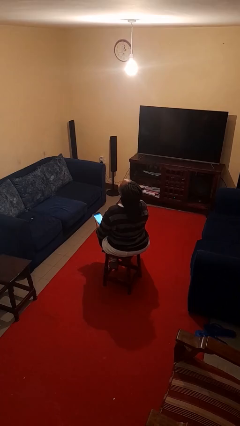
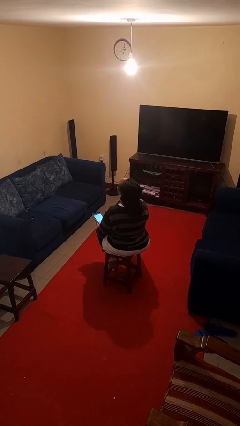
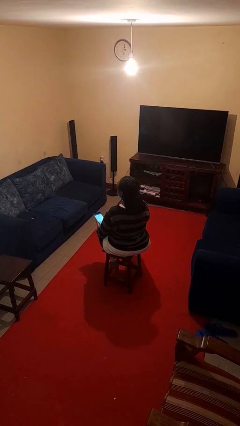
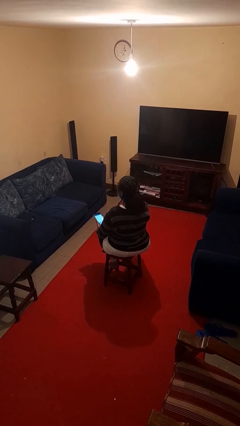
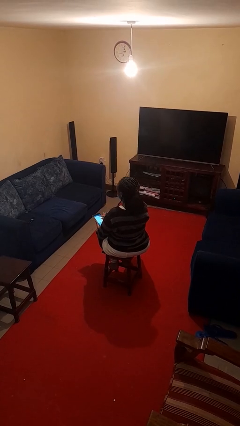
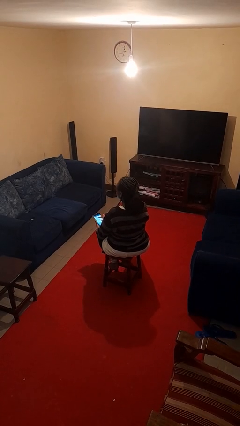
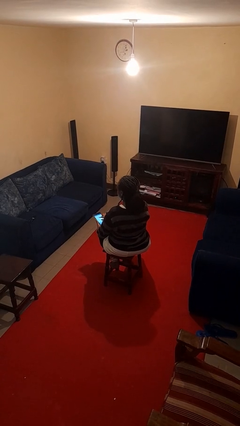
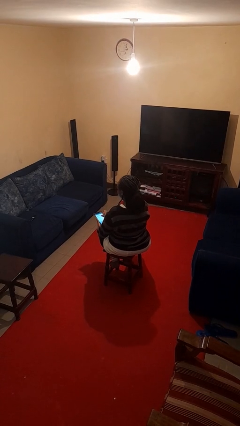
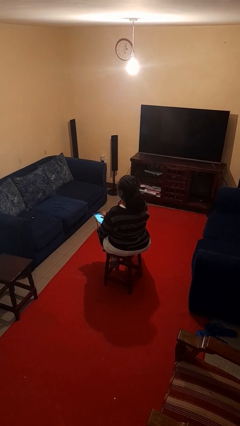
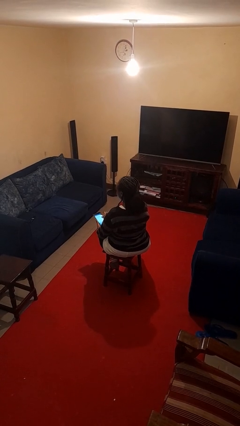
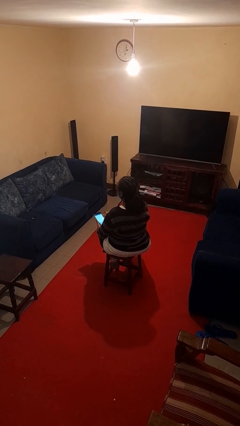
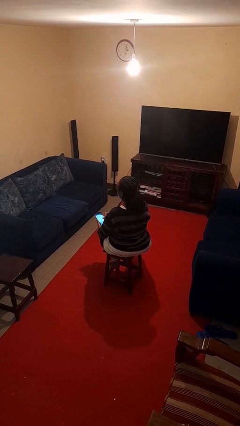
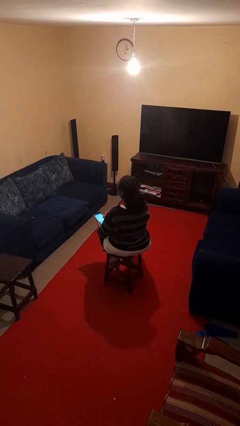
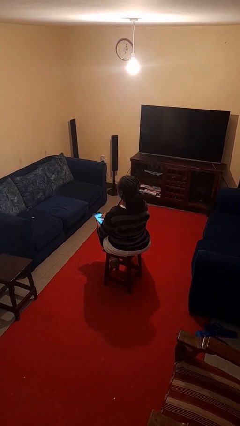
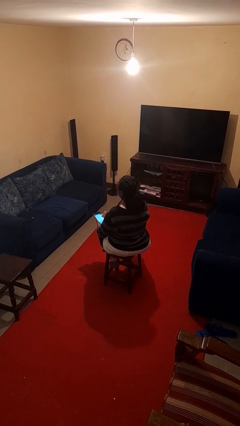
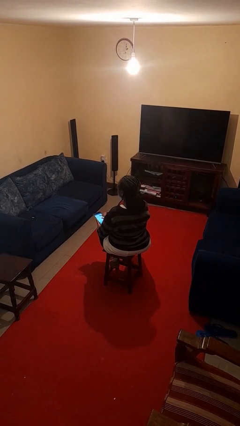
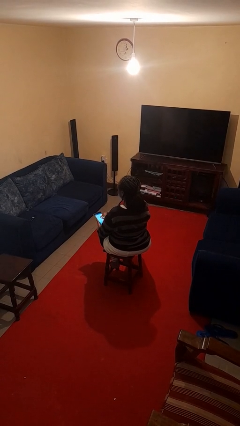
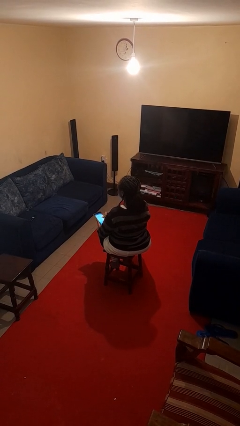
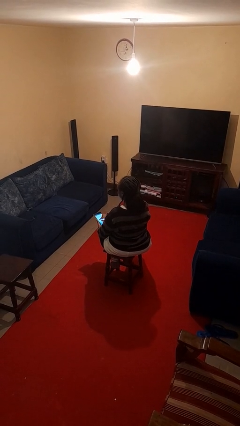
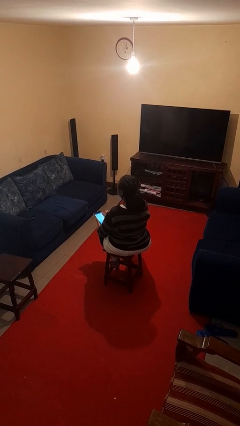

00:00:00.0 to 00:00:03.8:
person interacts with tablet

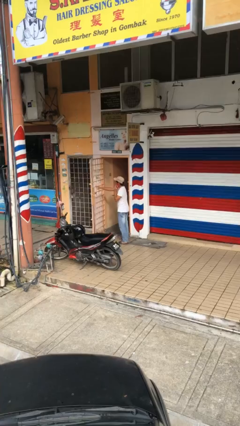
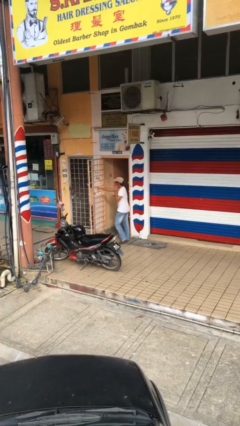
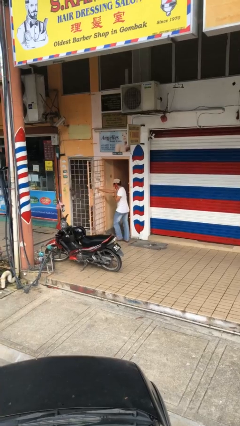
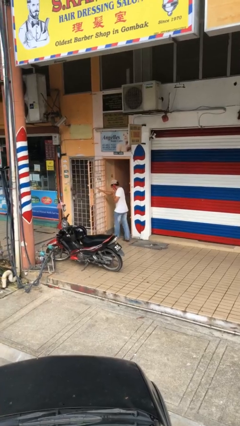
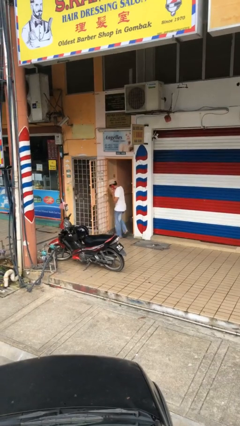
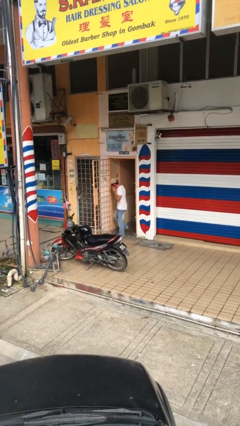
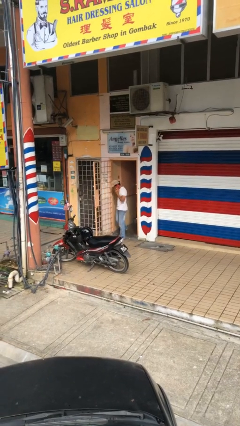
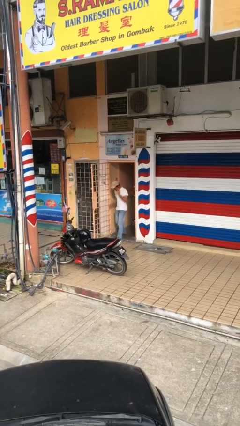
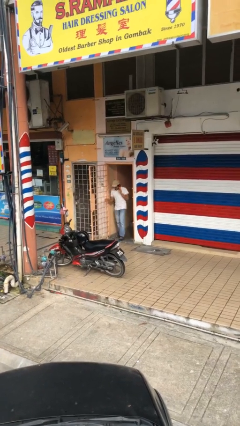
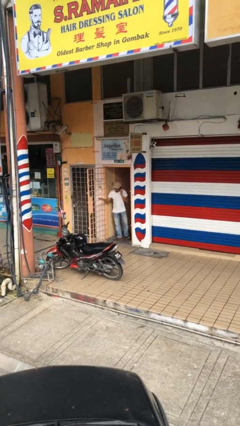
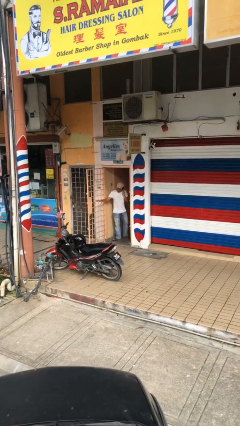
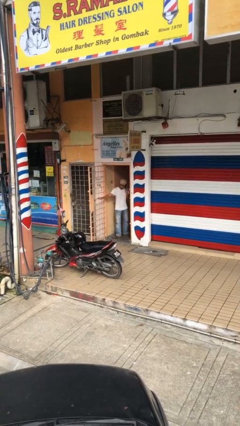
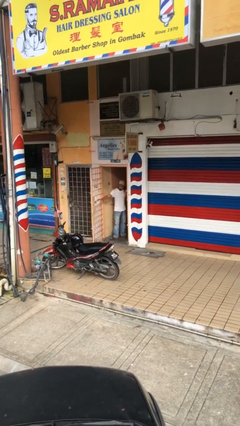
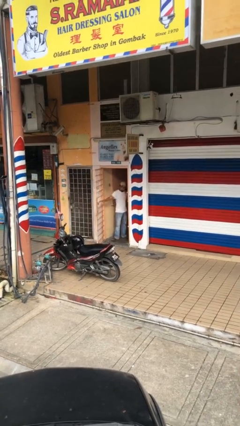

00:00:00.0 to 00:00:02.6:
person exits scene through structure

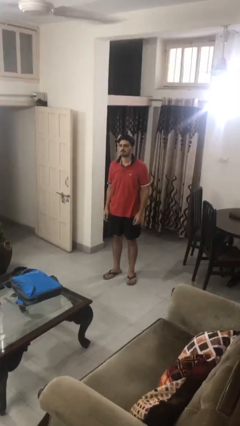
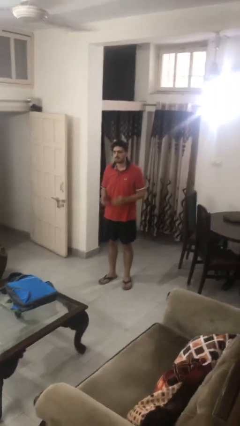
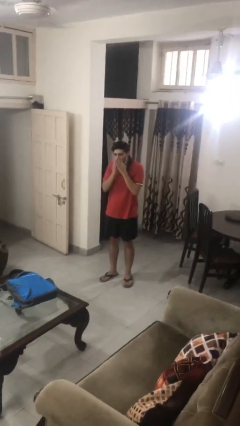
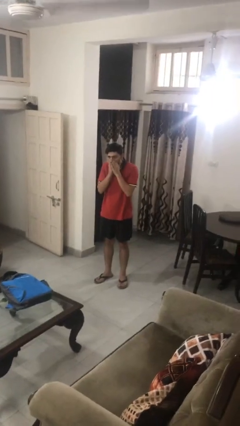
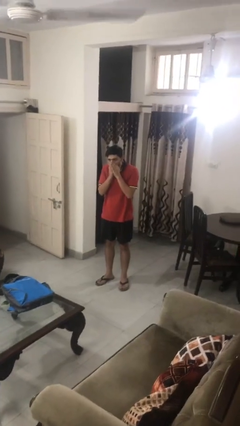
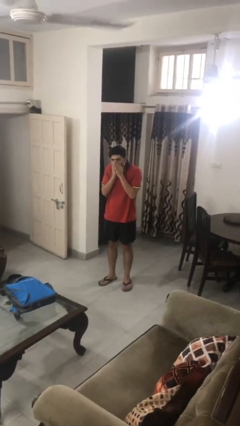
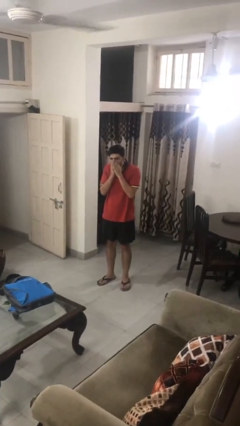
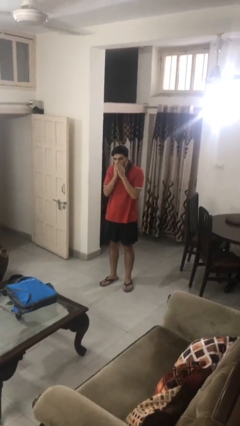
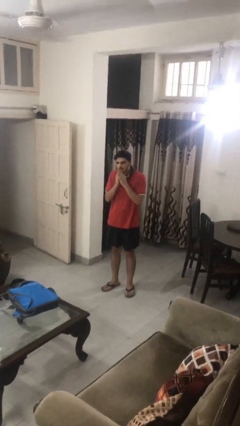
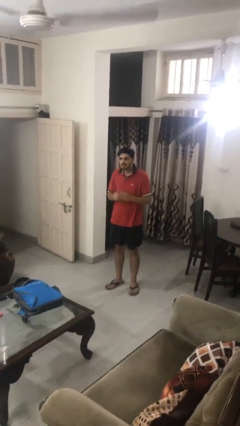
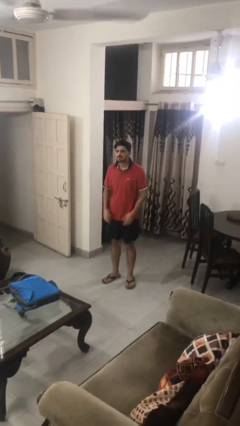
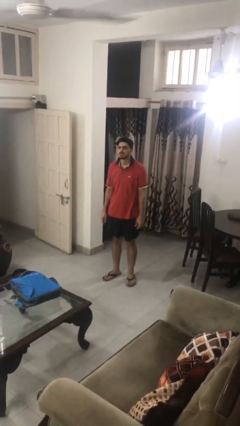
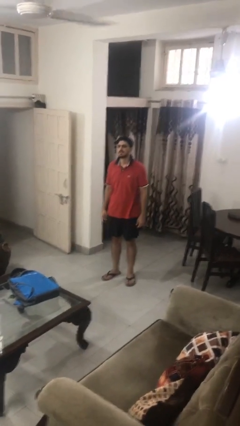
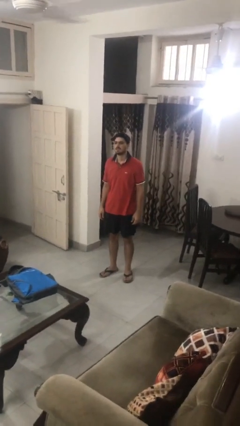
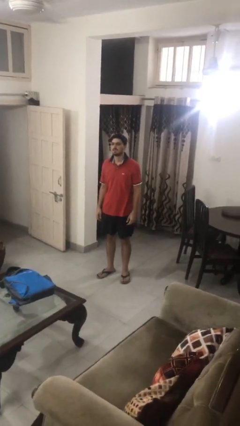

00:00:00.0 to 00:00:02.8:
person covers face with hands

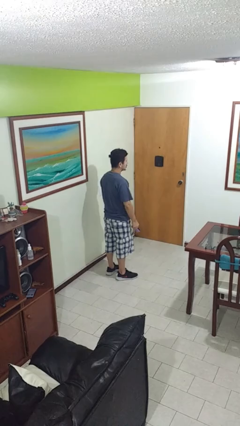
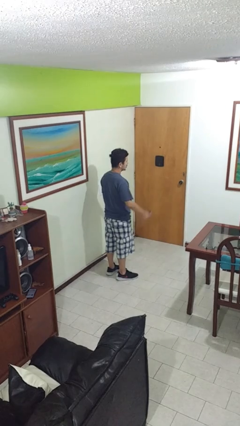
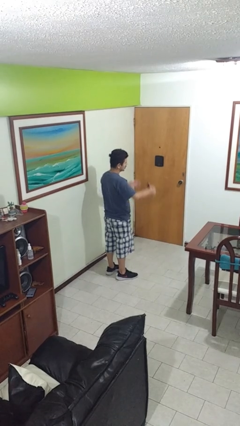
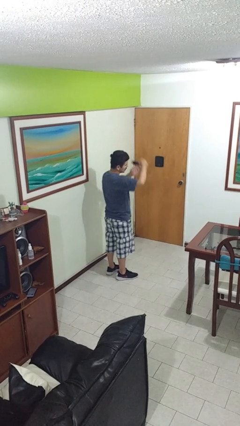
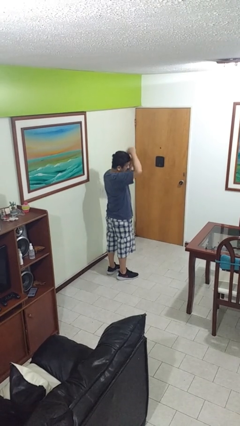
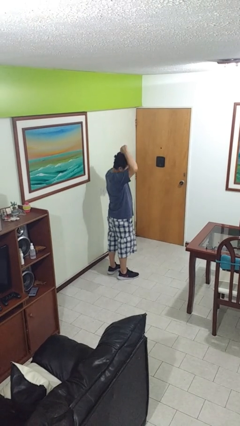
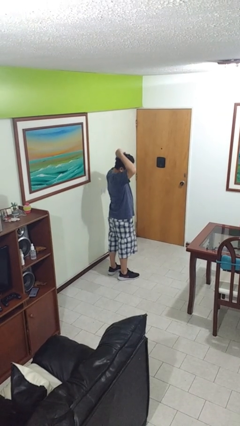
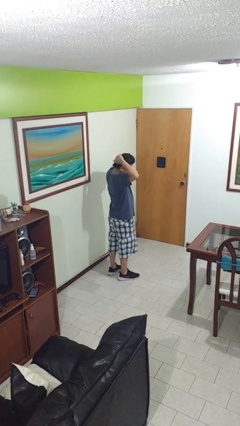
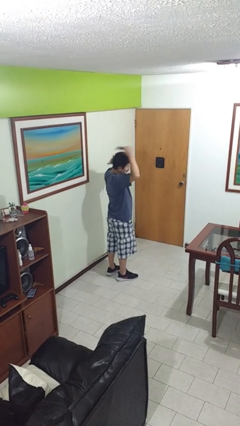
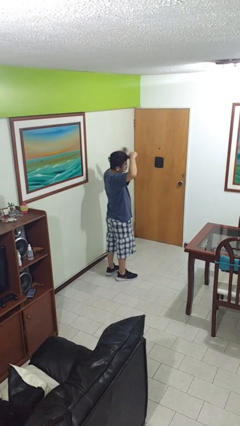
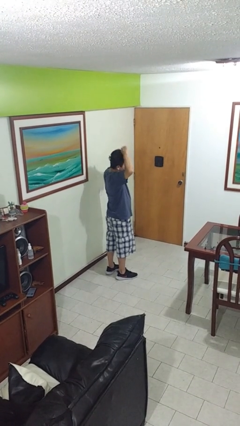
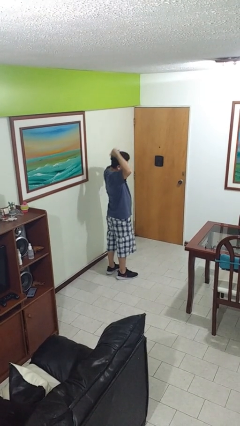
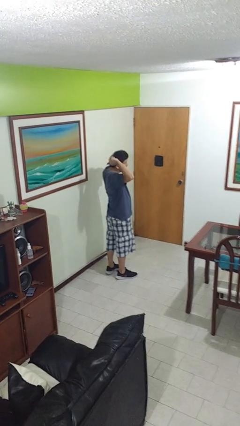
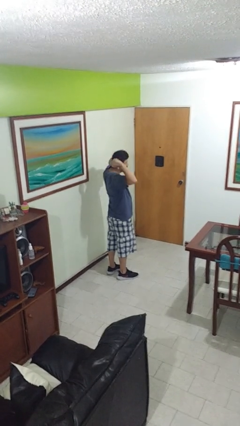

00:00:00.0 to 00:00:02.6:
person brushes hair

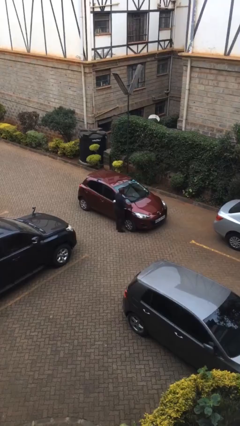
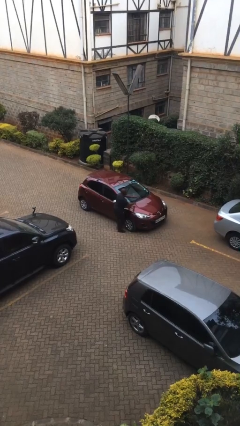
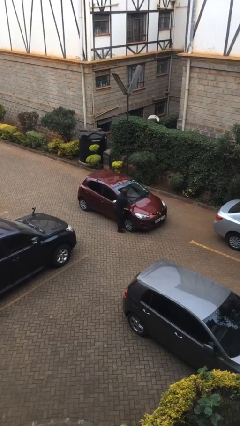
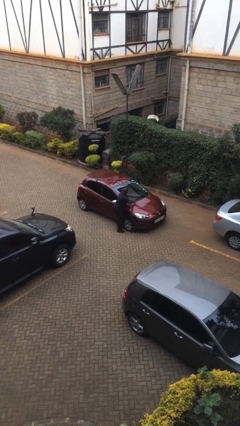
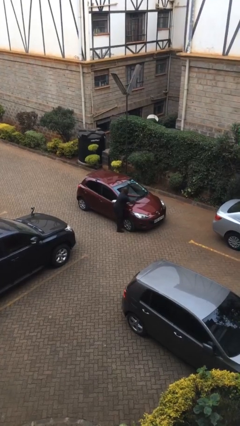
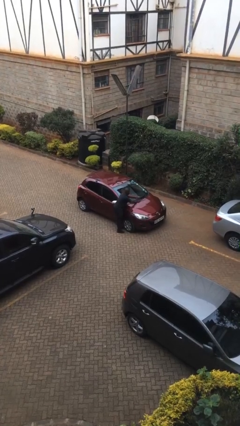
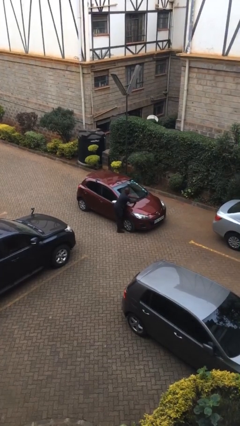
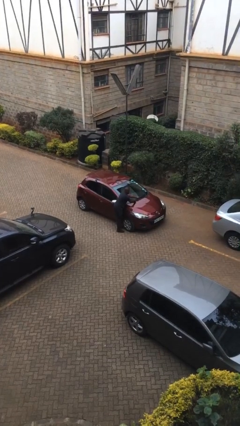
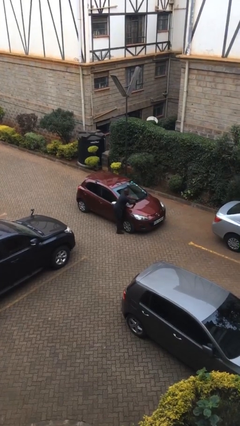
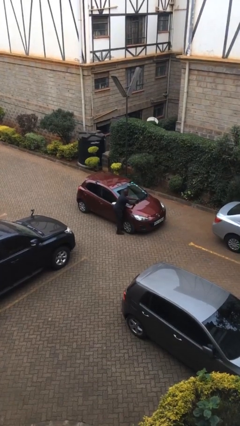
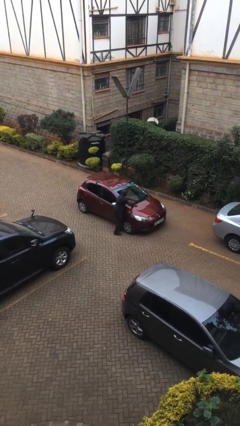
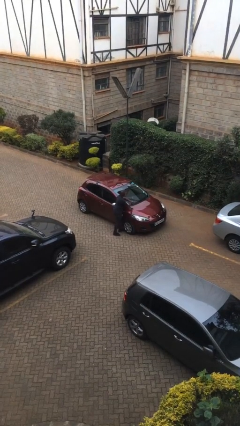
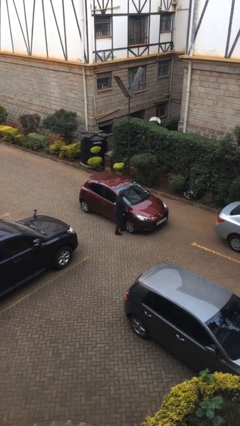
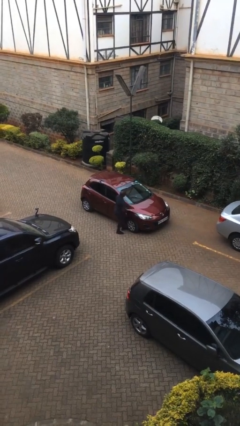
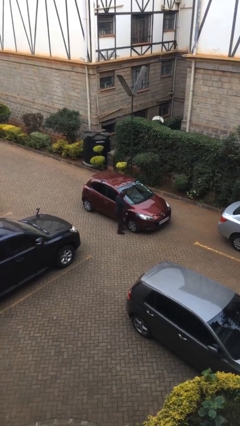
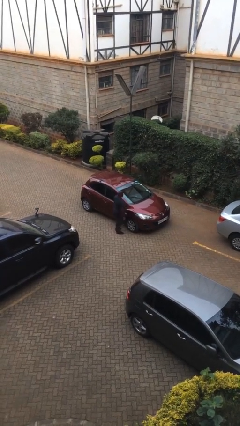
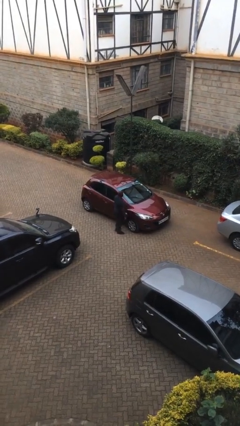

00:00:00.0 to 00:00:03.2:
person flips down car wipers

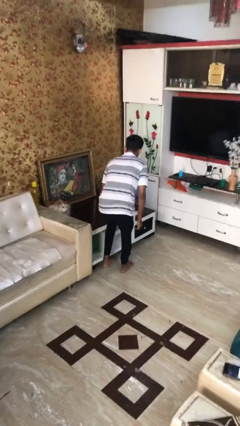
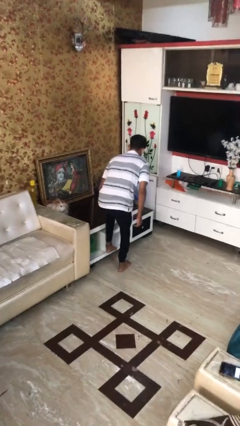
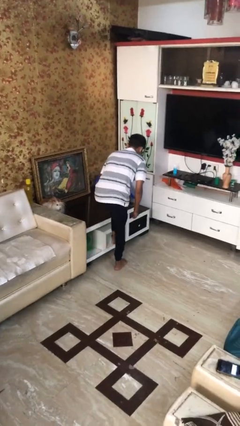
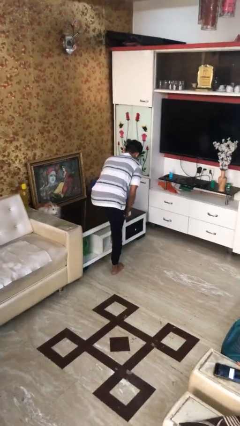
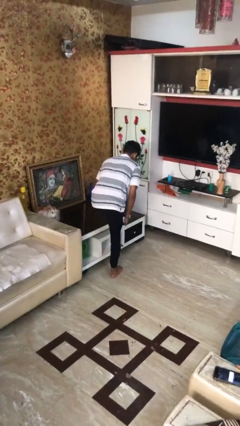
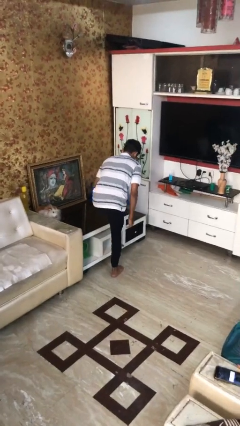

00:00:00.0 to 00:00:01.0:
person bumps into table

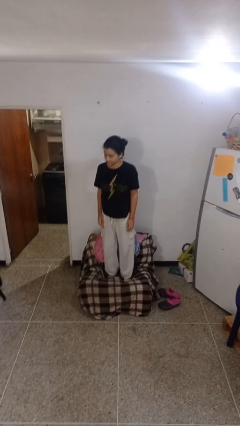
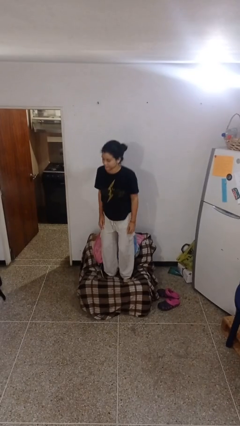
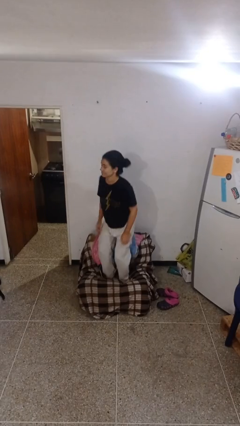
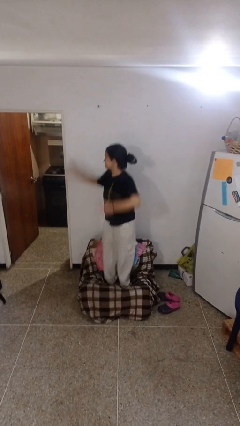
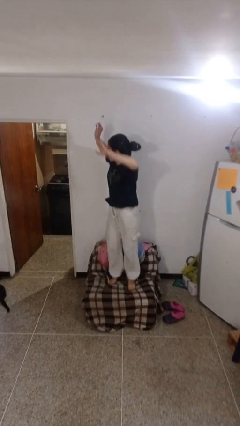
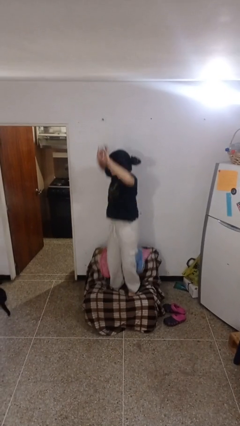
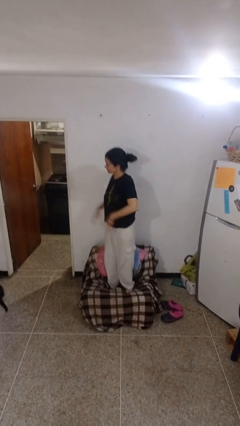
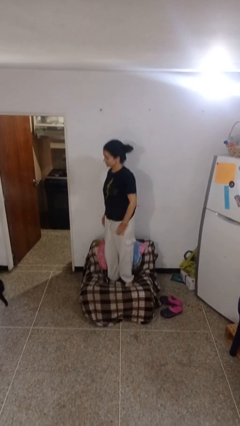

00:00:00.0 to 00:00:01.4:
person jumps on couch
